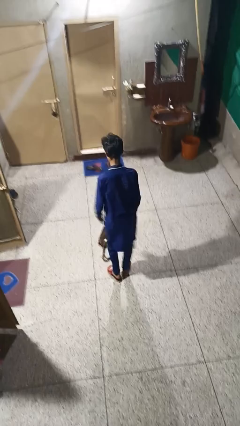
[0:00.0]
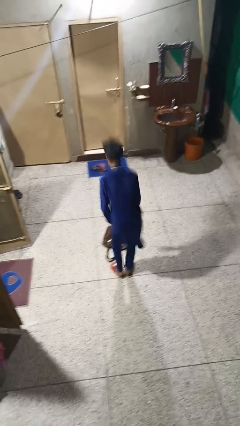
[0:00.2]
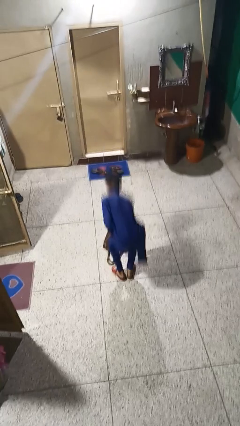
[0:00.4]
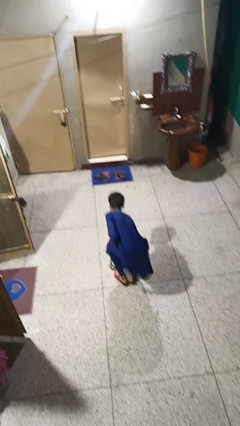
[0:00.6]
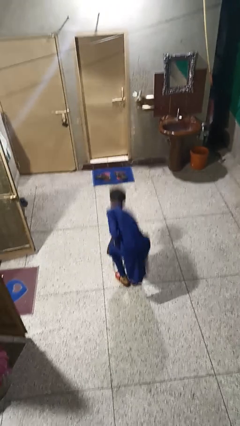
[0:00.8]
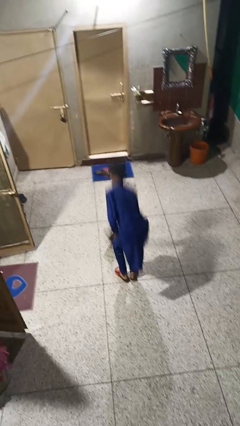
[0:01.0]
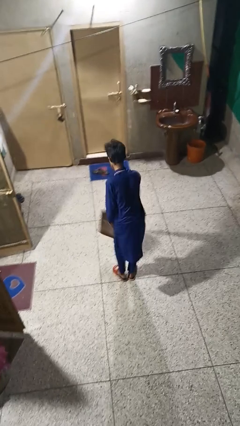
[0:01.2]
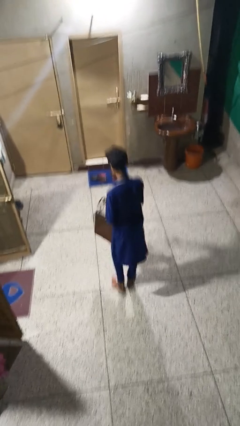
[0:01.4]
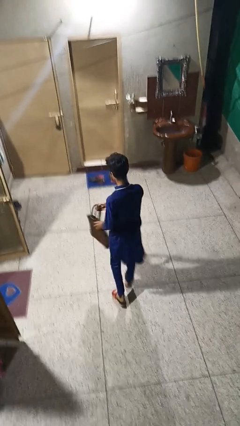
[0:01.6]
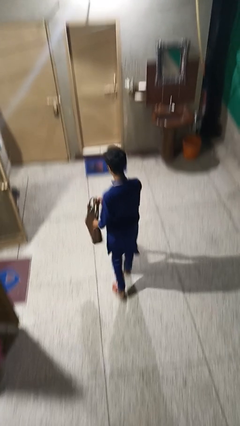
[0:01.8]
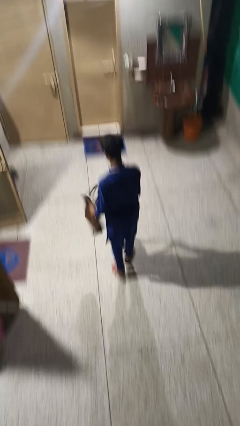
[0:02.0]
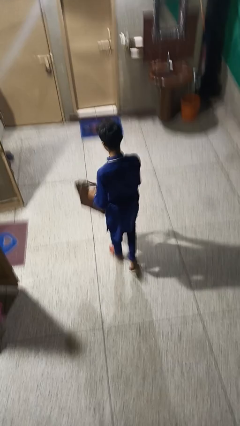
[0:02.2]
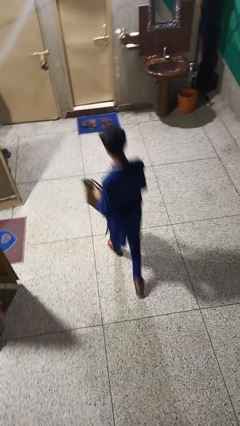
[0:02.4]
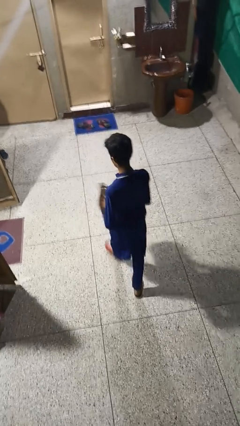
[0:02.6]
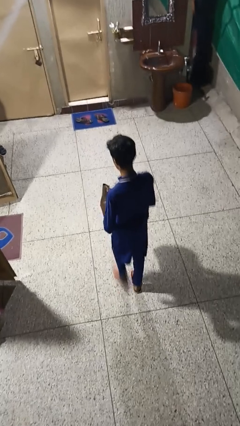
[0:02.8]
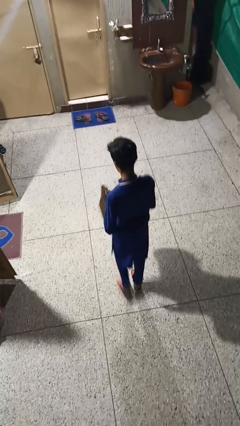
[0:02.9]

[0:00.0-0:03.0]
person picks up object from floor

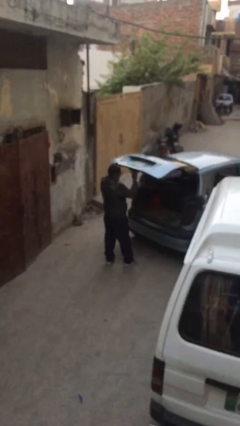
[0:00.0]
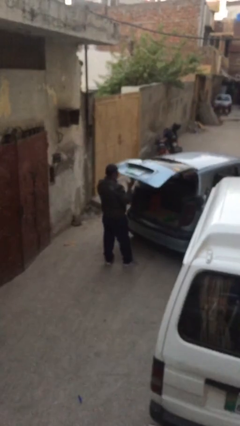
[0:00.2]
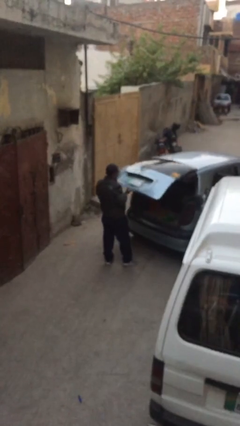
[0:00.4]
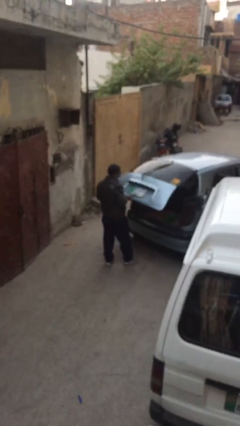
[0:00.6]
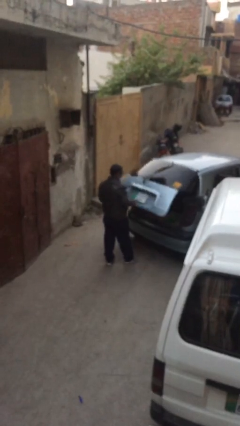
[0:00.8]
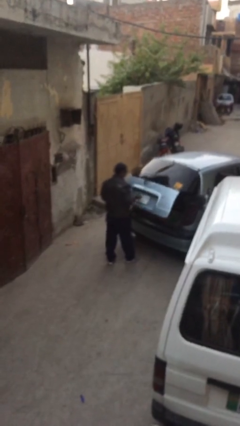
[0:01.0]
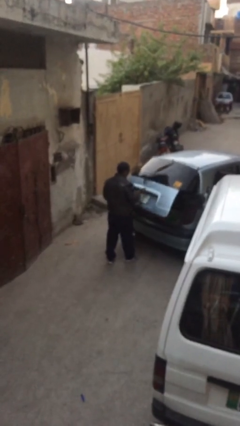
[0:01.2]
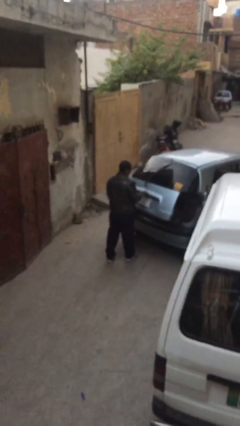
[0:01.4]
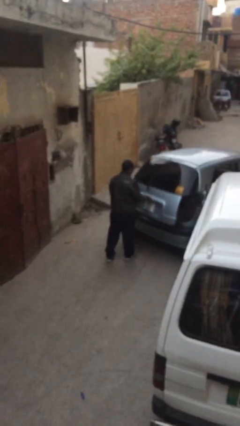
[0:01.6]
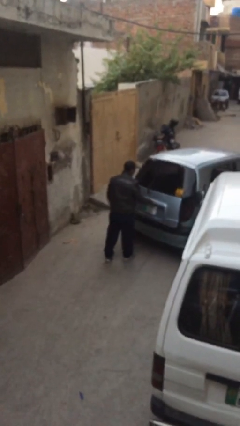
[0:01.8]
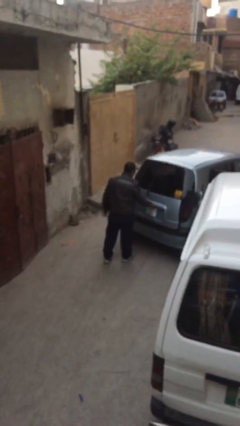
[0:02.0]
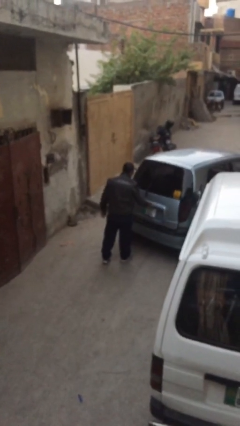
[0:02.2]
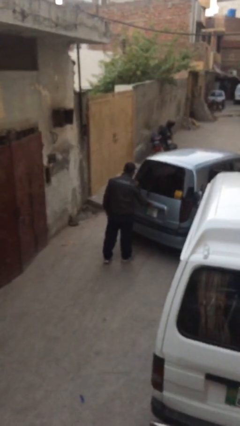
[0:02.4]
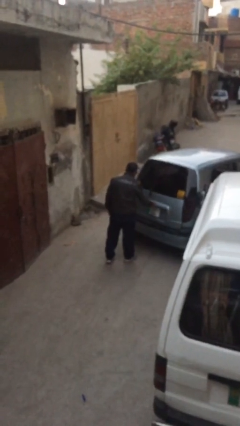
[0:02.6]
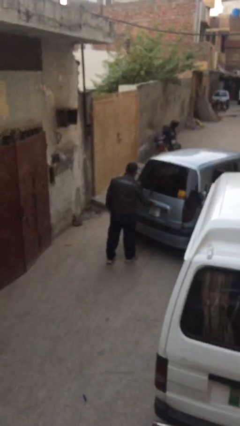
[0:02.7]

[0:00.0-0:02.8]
person closes car trunk

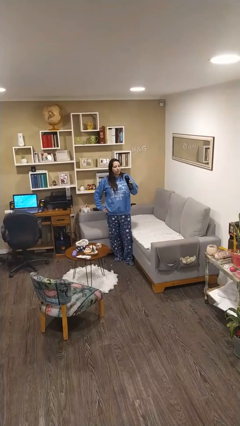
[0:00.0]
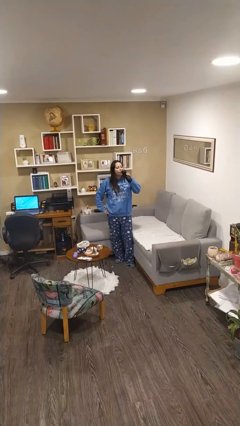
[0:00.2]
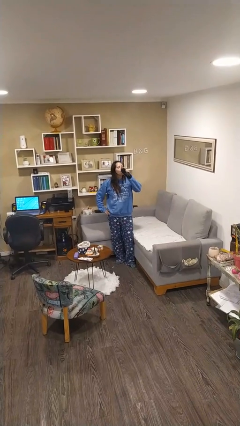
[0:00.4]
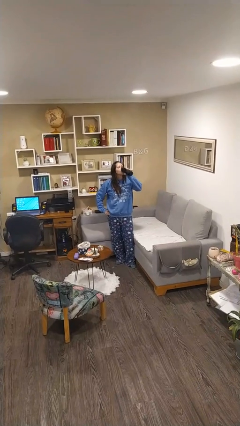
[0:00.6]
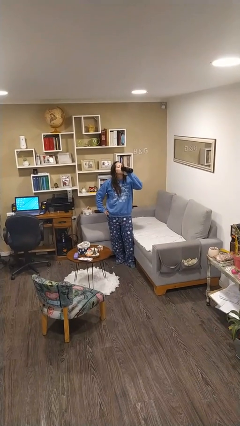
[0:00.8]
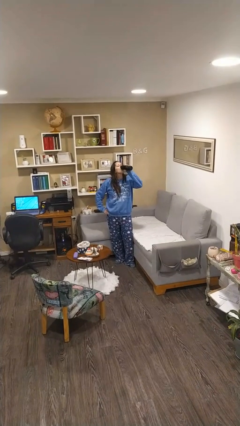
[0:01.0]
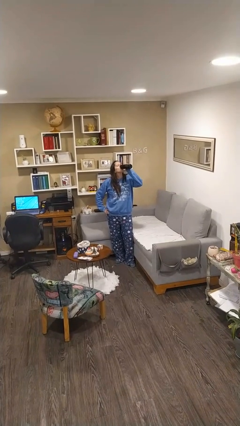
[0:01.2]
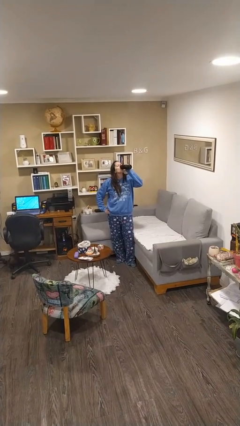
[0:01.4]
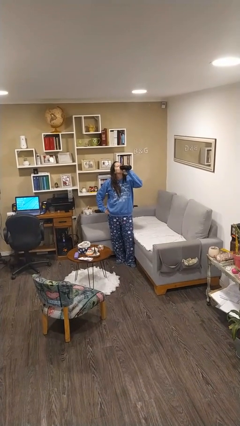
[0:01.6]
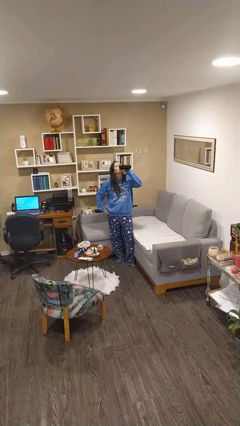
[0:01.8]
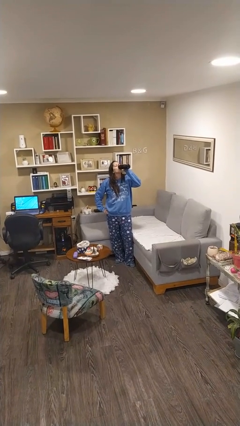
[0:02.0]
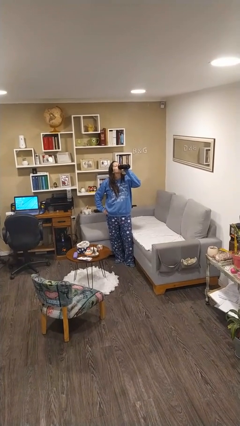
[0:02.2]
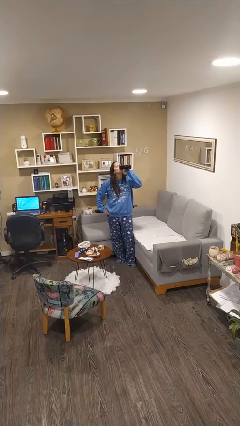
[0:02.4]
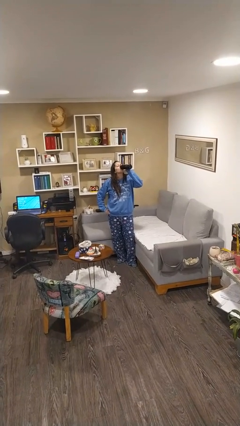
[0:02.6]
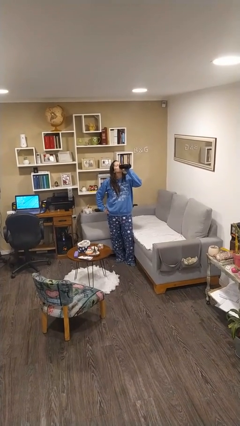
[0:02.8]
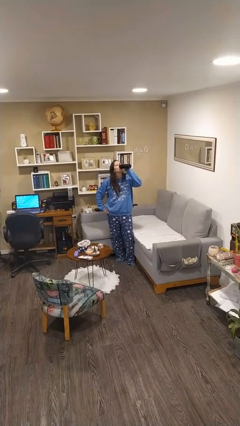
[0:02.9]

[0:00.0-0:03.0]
person drinks from bottle

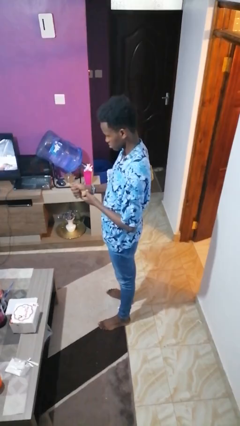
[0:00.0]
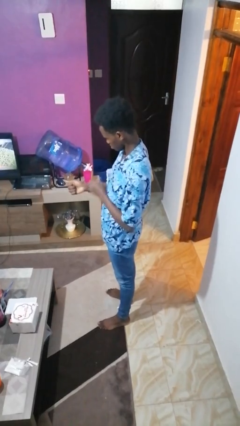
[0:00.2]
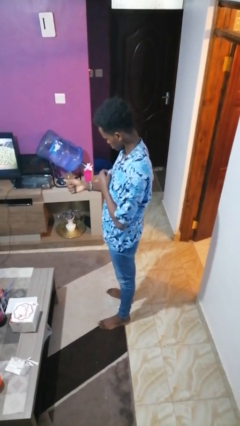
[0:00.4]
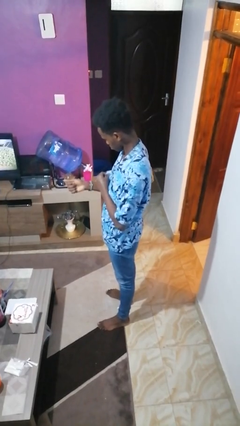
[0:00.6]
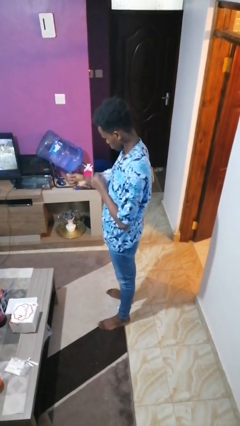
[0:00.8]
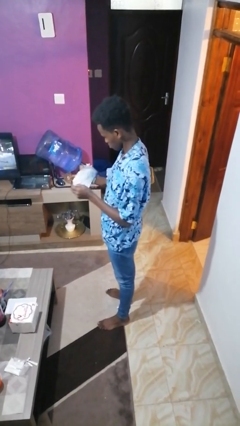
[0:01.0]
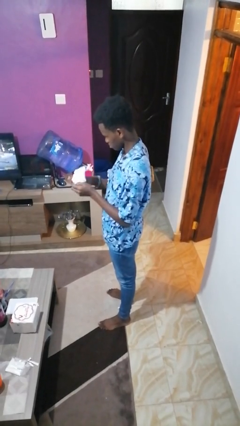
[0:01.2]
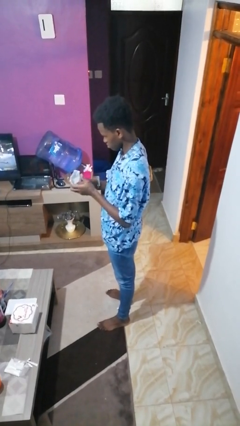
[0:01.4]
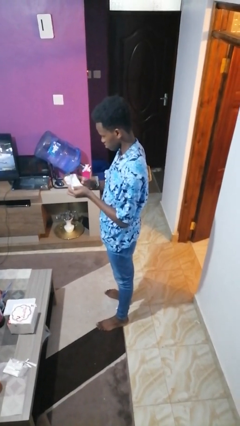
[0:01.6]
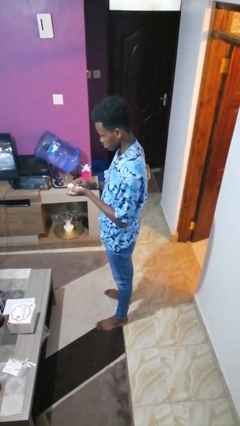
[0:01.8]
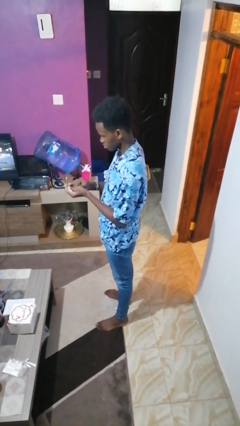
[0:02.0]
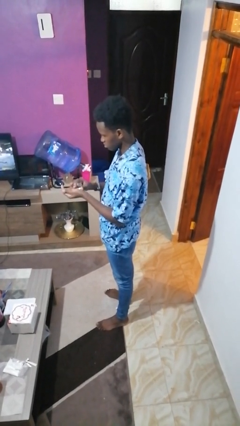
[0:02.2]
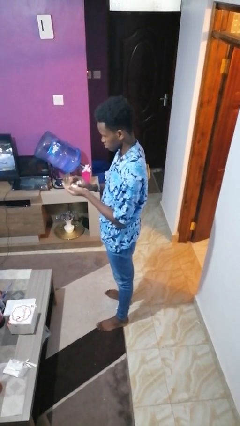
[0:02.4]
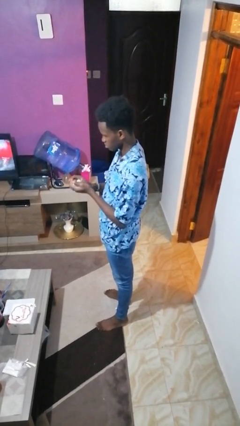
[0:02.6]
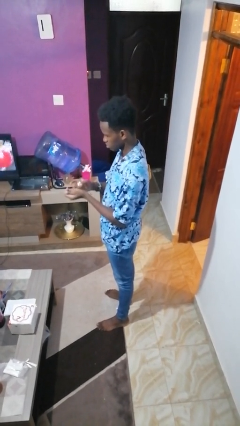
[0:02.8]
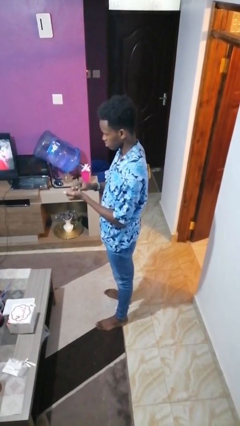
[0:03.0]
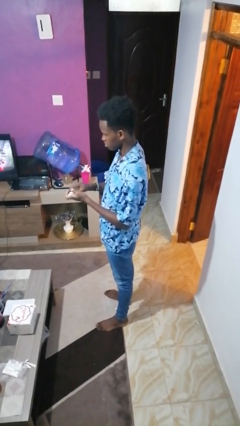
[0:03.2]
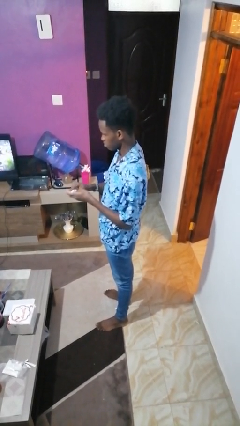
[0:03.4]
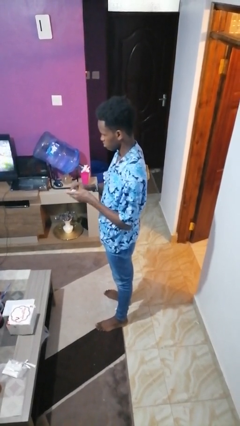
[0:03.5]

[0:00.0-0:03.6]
person crumples paper

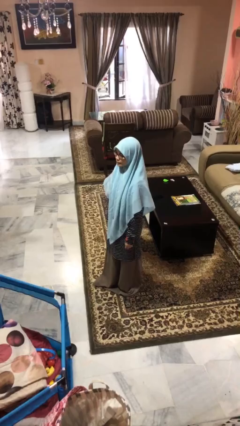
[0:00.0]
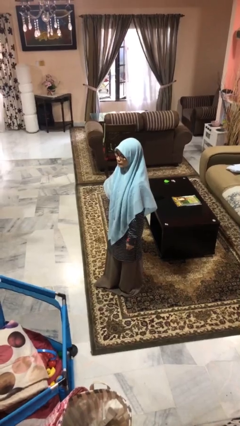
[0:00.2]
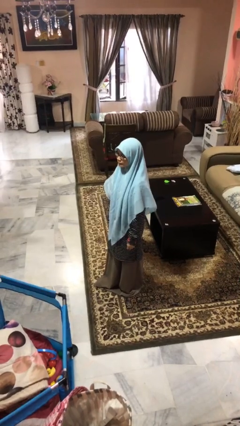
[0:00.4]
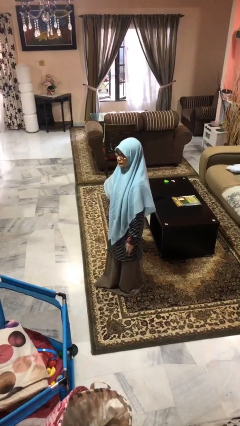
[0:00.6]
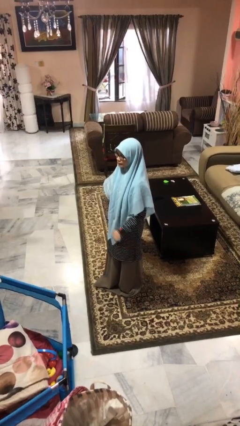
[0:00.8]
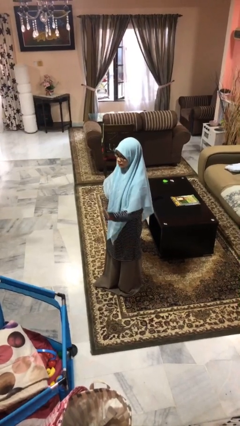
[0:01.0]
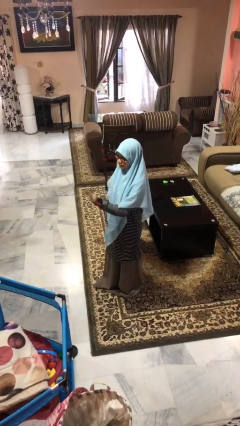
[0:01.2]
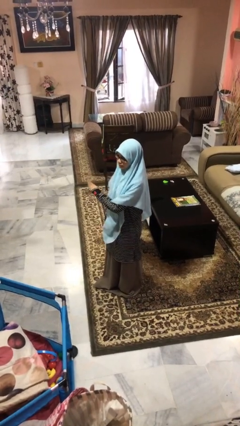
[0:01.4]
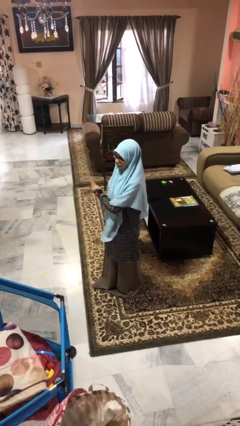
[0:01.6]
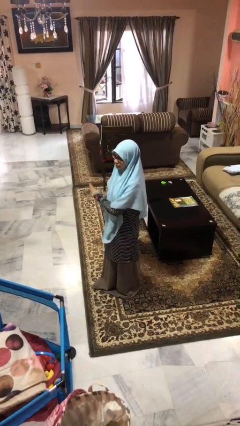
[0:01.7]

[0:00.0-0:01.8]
person gestures swipe right

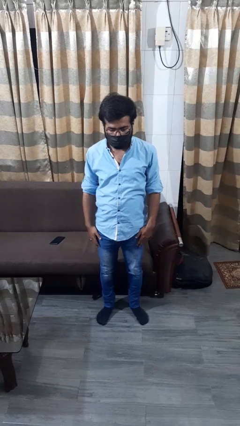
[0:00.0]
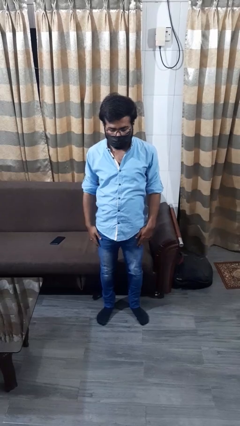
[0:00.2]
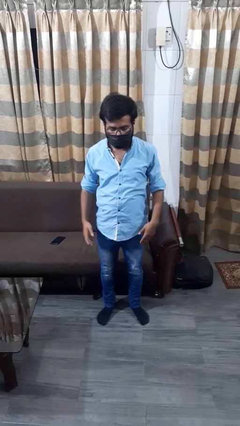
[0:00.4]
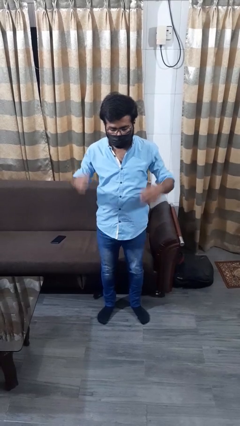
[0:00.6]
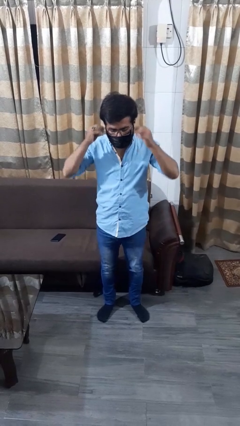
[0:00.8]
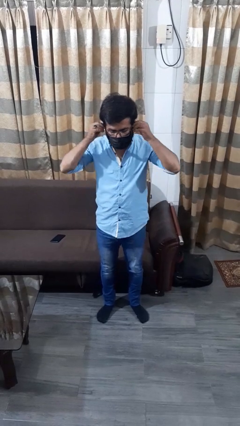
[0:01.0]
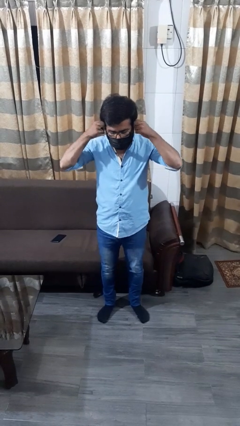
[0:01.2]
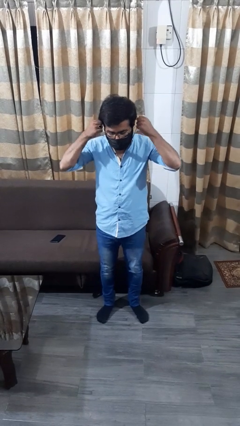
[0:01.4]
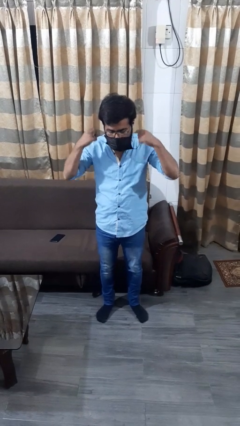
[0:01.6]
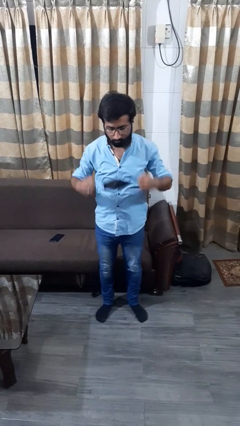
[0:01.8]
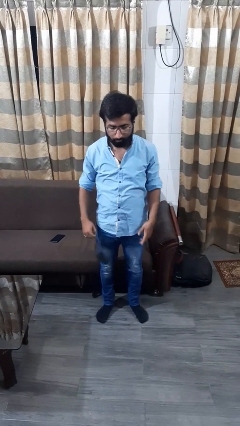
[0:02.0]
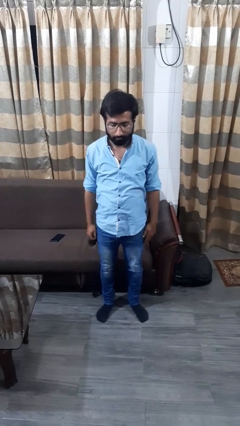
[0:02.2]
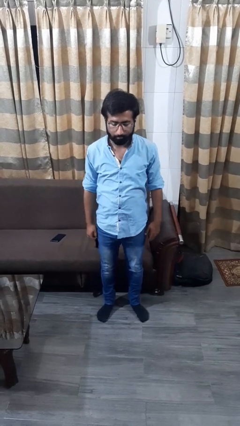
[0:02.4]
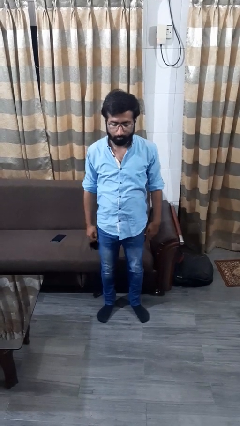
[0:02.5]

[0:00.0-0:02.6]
person takes off facemask

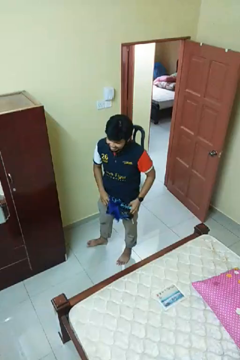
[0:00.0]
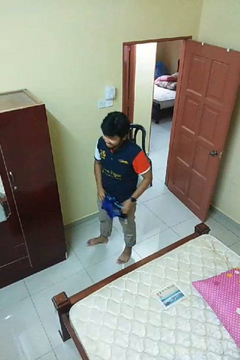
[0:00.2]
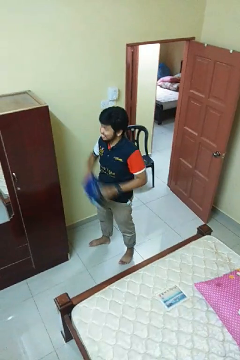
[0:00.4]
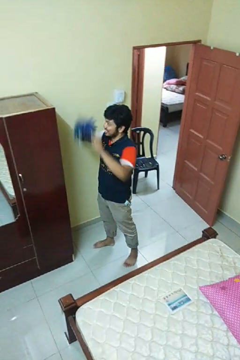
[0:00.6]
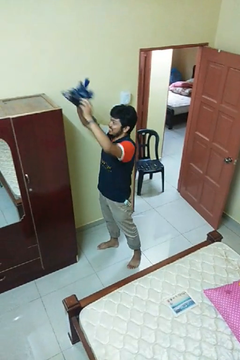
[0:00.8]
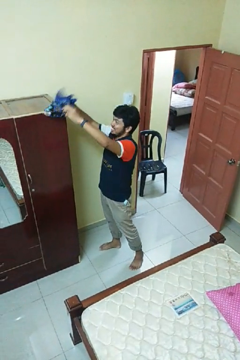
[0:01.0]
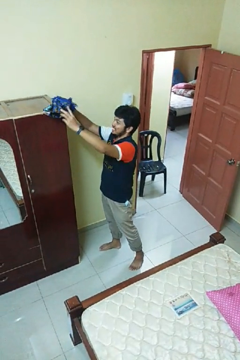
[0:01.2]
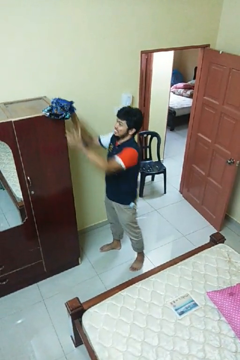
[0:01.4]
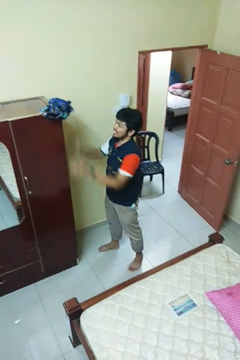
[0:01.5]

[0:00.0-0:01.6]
person puts down object on countertop
